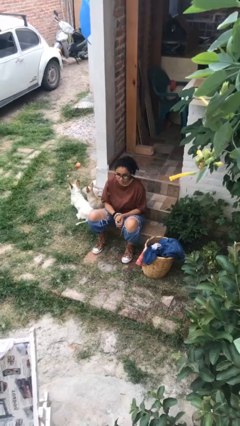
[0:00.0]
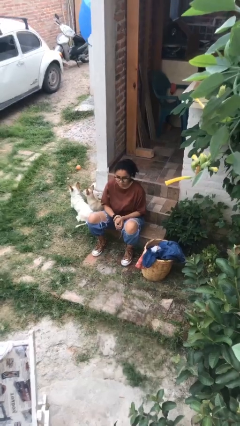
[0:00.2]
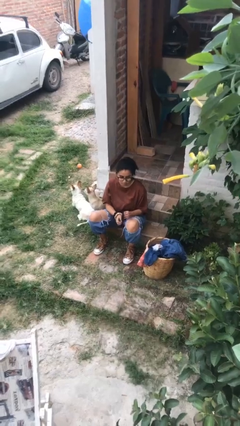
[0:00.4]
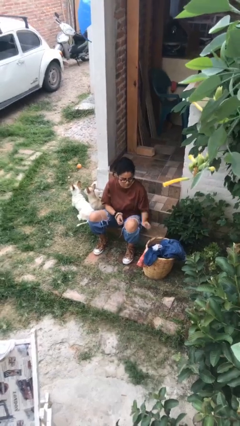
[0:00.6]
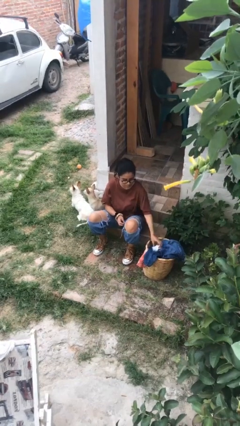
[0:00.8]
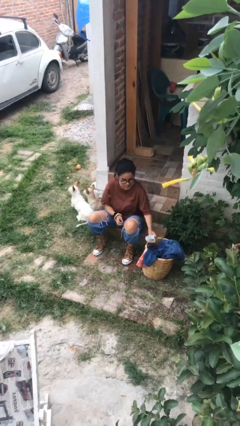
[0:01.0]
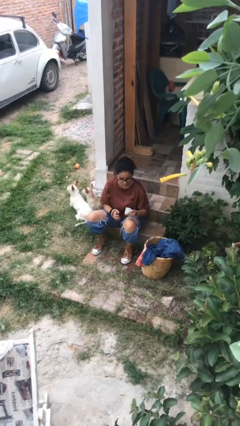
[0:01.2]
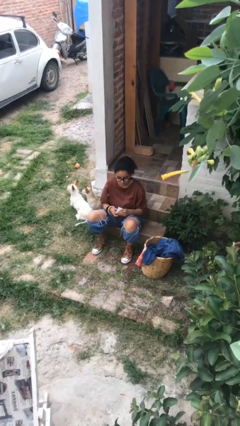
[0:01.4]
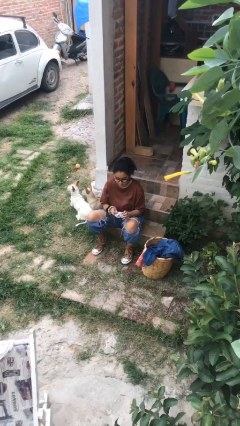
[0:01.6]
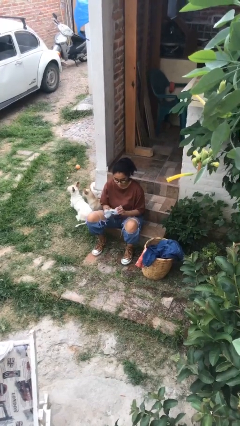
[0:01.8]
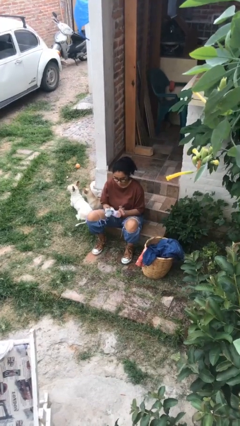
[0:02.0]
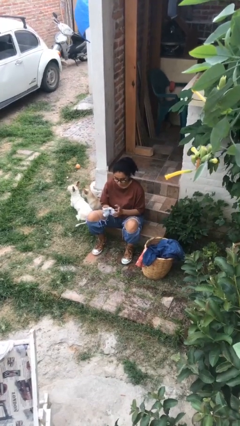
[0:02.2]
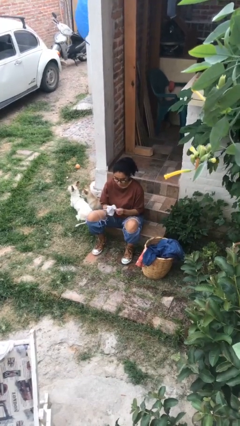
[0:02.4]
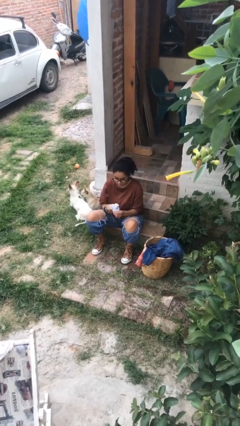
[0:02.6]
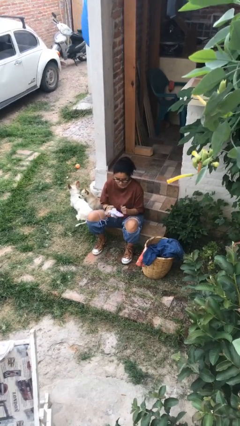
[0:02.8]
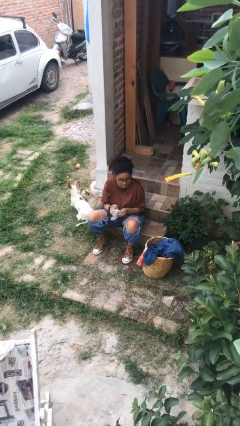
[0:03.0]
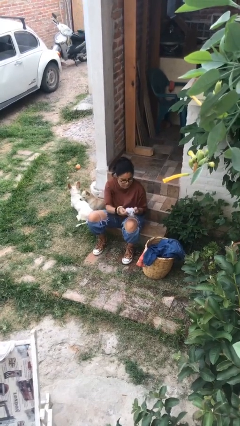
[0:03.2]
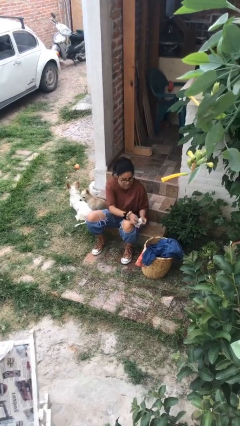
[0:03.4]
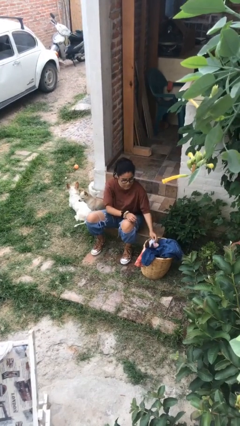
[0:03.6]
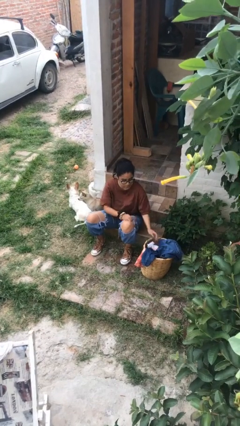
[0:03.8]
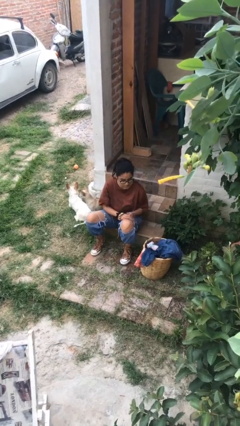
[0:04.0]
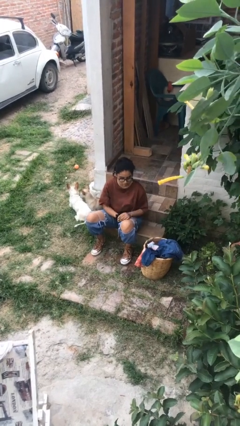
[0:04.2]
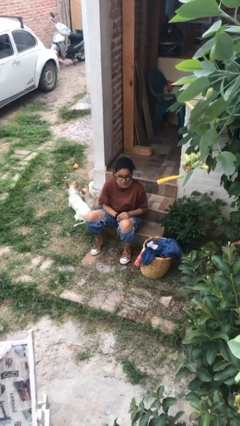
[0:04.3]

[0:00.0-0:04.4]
person folds socks

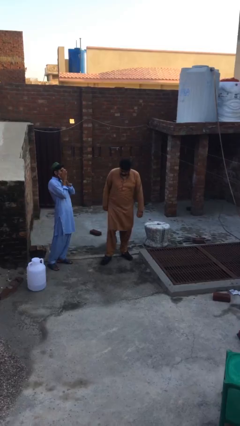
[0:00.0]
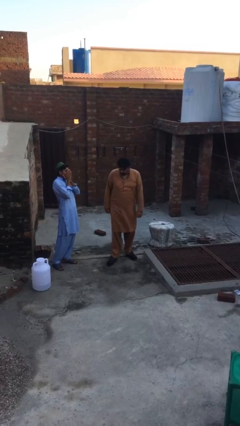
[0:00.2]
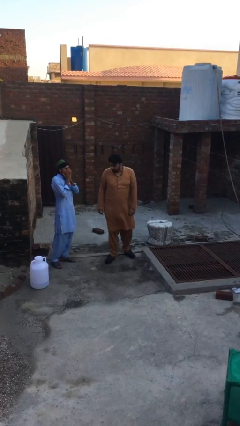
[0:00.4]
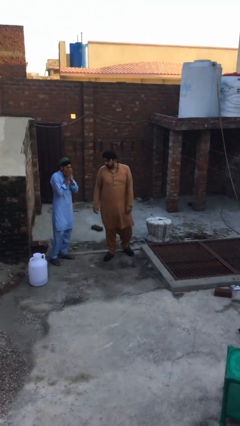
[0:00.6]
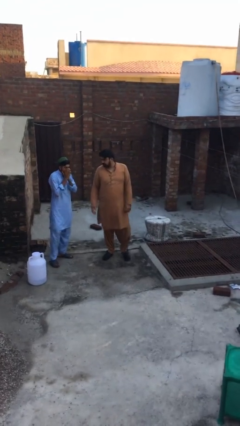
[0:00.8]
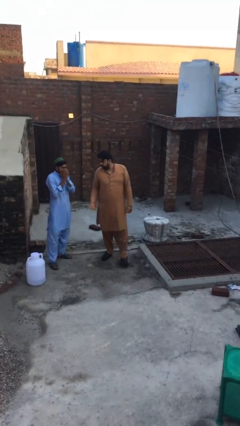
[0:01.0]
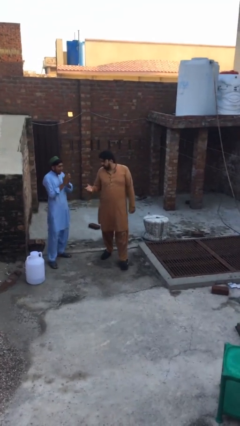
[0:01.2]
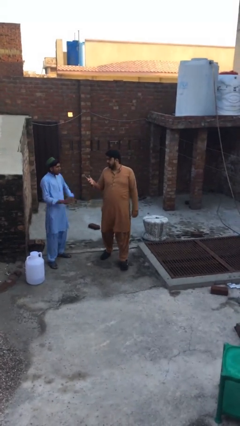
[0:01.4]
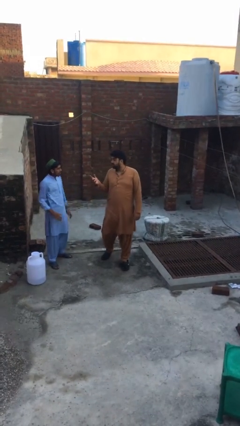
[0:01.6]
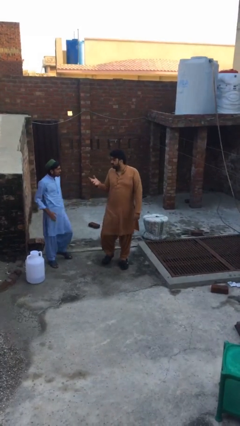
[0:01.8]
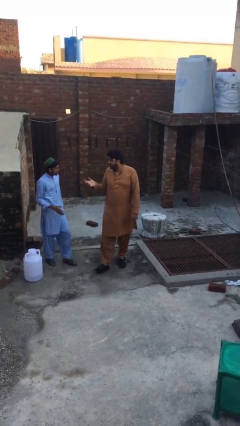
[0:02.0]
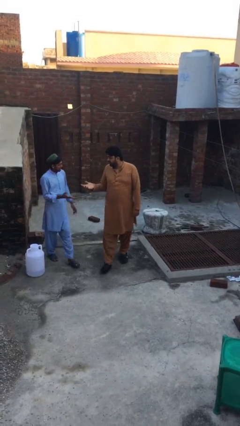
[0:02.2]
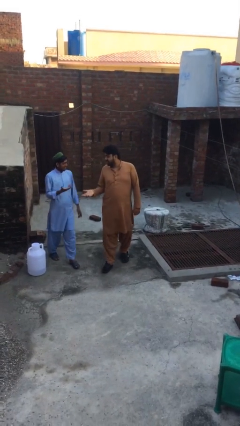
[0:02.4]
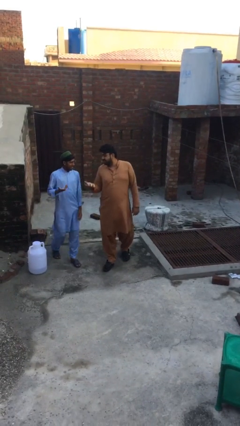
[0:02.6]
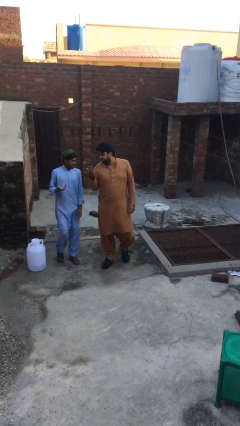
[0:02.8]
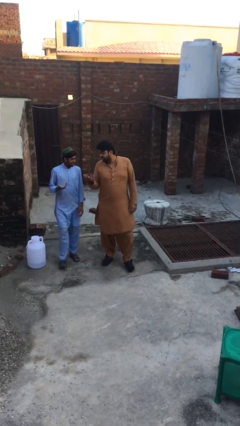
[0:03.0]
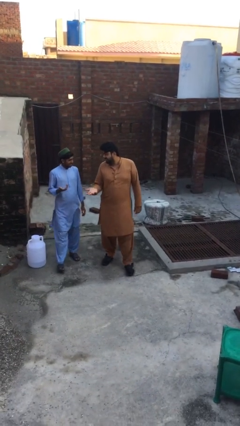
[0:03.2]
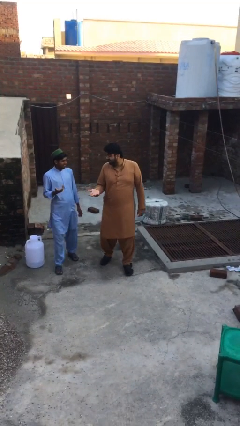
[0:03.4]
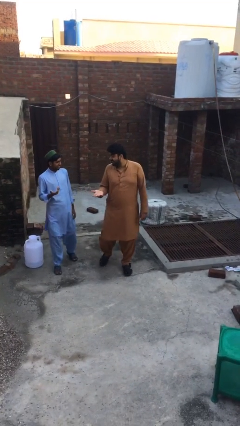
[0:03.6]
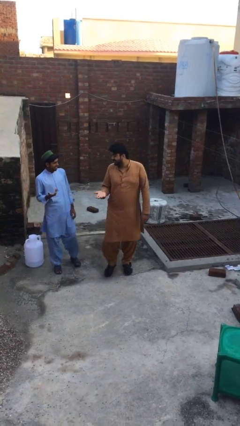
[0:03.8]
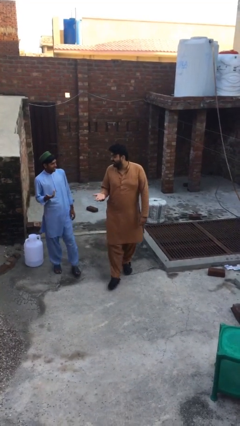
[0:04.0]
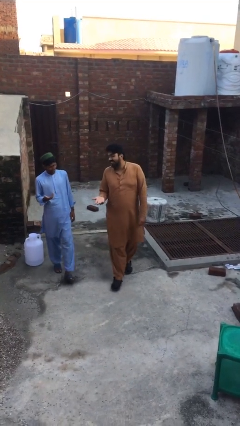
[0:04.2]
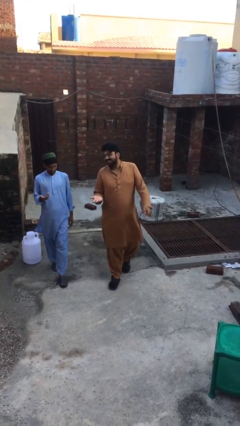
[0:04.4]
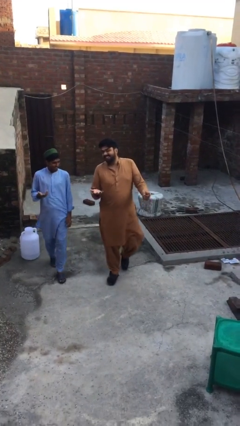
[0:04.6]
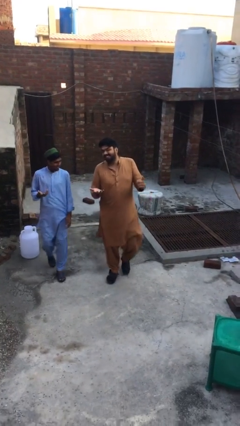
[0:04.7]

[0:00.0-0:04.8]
person talks to person

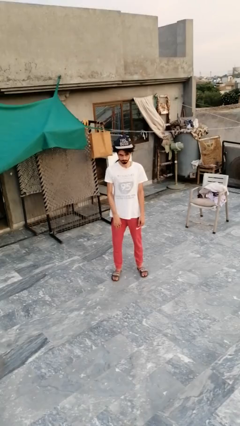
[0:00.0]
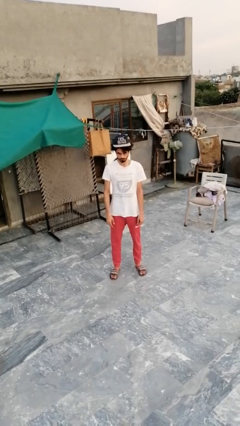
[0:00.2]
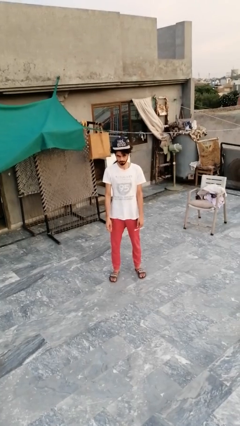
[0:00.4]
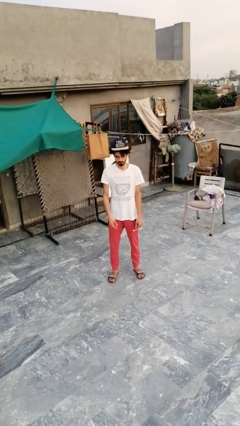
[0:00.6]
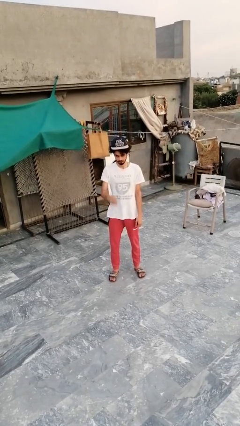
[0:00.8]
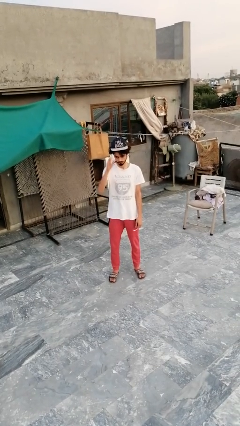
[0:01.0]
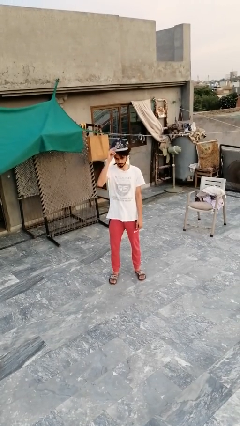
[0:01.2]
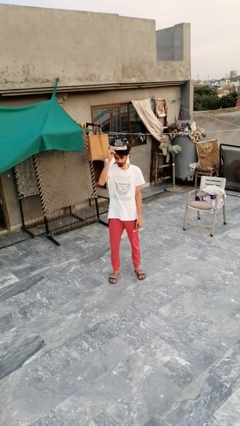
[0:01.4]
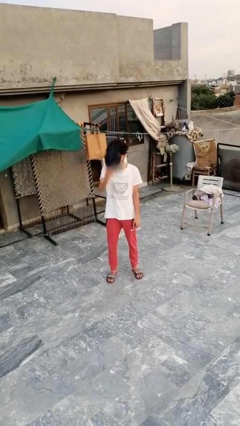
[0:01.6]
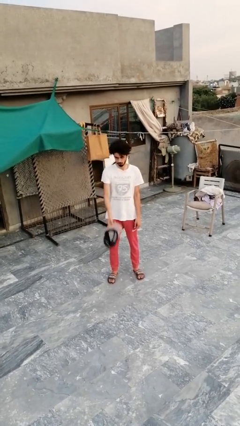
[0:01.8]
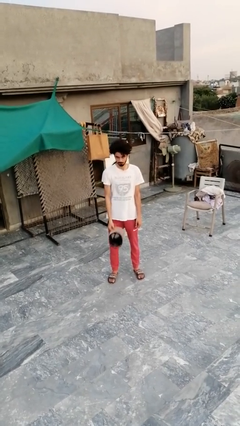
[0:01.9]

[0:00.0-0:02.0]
person takes off hat

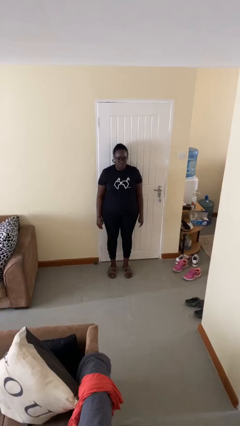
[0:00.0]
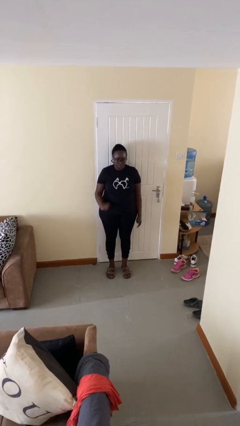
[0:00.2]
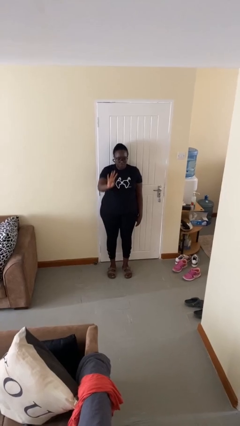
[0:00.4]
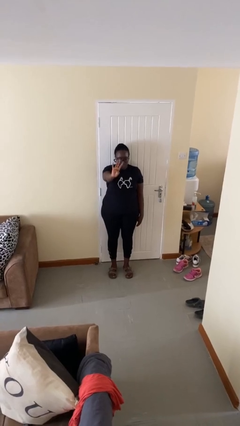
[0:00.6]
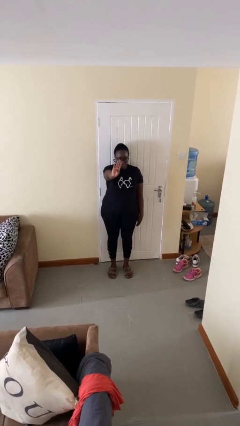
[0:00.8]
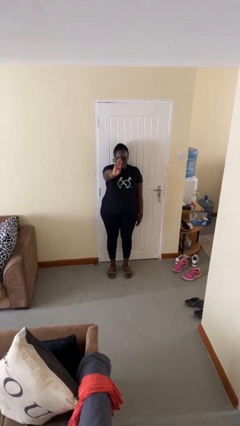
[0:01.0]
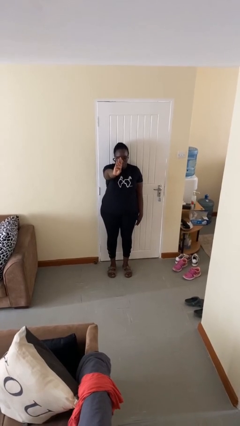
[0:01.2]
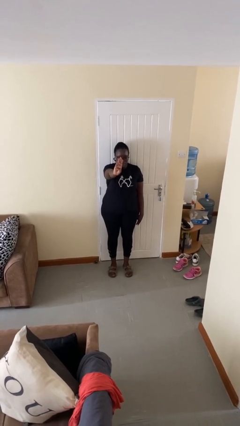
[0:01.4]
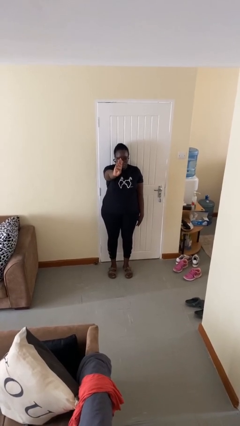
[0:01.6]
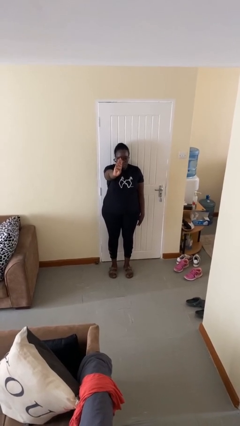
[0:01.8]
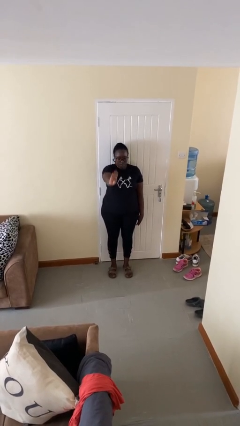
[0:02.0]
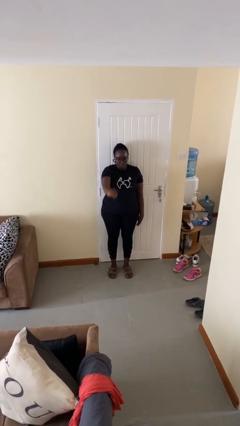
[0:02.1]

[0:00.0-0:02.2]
person gestures number four

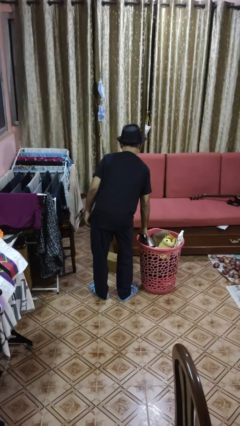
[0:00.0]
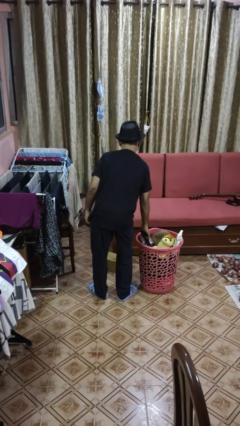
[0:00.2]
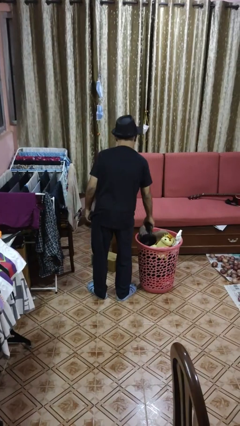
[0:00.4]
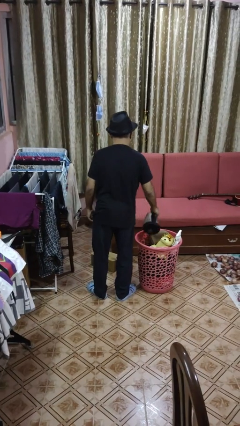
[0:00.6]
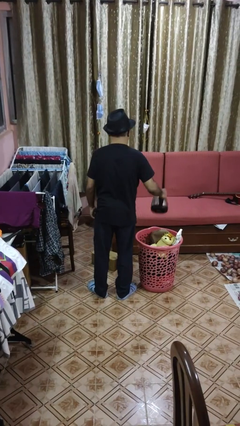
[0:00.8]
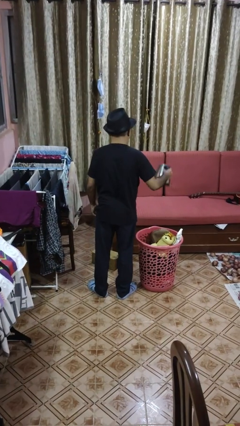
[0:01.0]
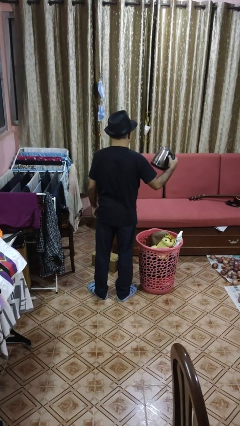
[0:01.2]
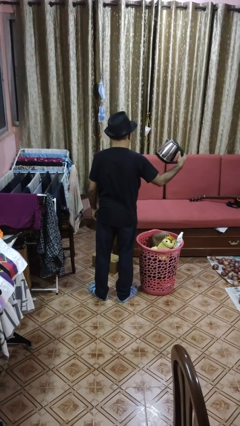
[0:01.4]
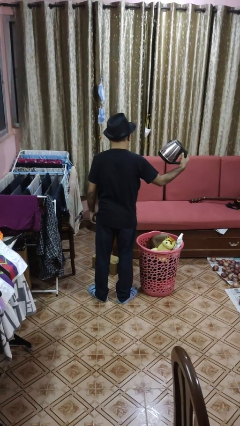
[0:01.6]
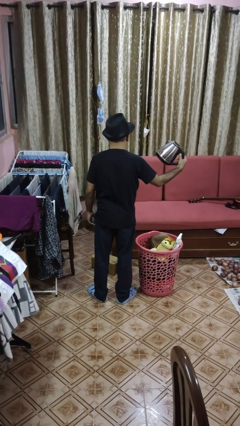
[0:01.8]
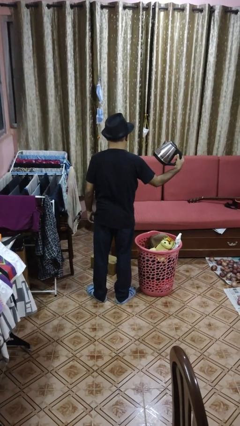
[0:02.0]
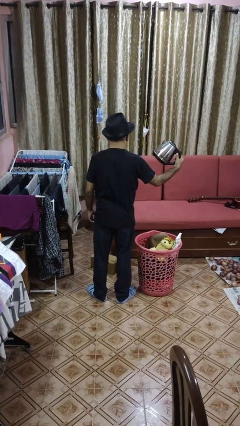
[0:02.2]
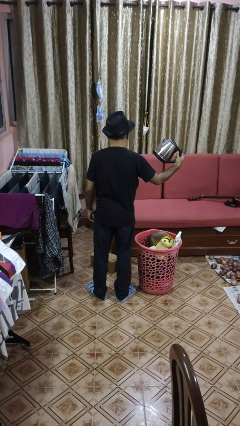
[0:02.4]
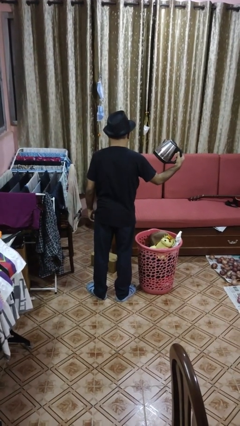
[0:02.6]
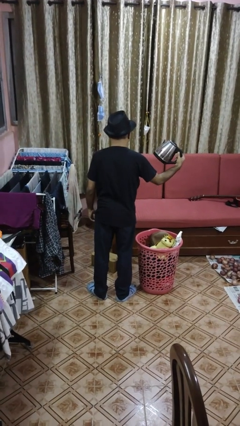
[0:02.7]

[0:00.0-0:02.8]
person takes object from basket

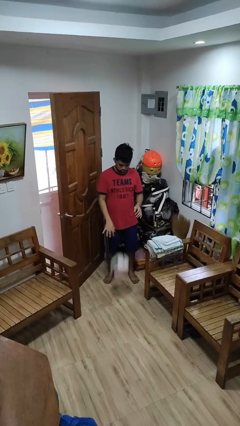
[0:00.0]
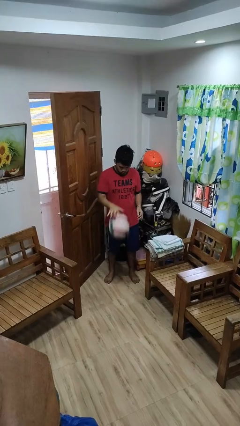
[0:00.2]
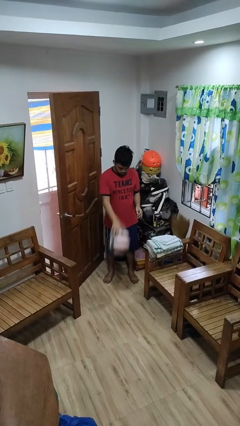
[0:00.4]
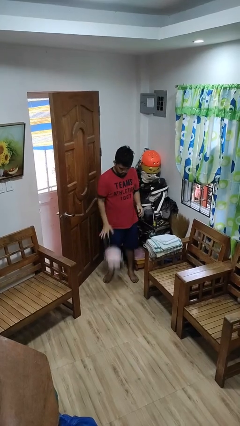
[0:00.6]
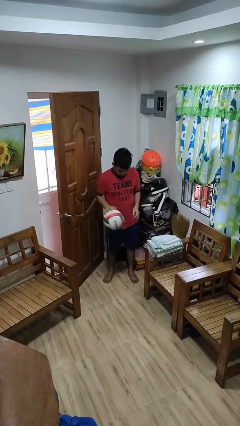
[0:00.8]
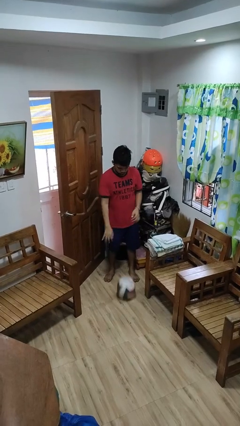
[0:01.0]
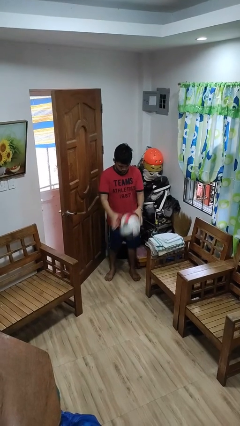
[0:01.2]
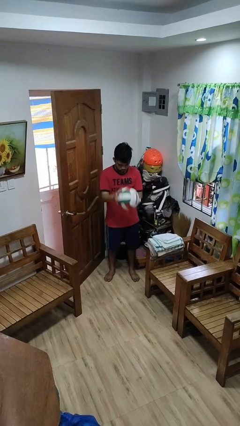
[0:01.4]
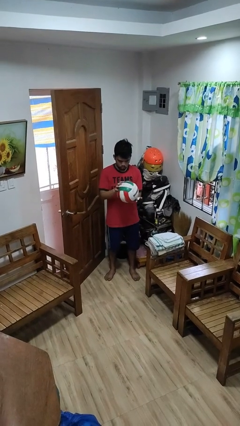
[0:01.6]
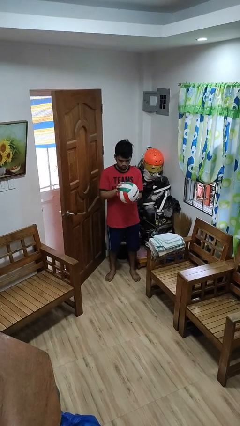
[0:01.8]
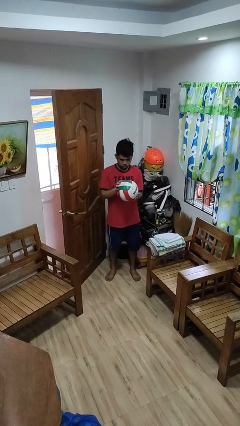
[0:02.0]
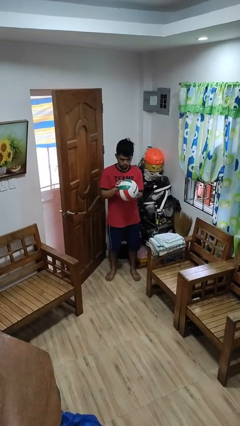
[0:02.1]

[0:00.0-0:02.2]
person bounces ball on floor
